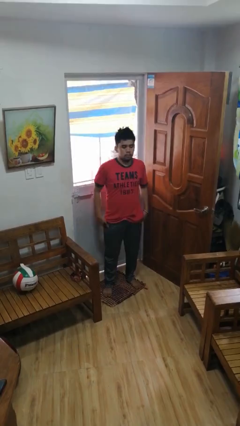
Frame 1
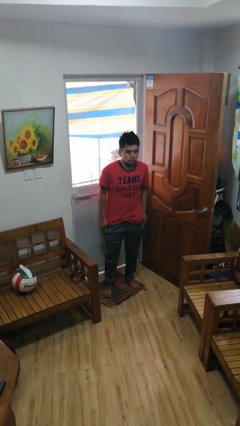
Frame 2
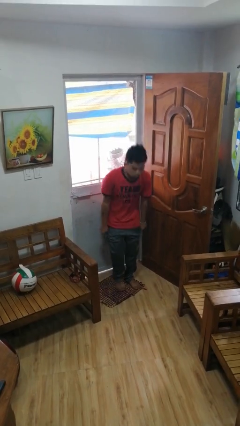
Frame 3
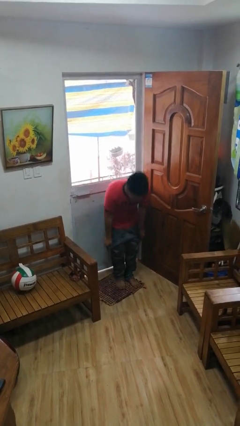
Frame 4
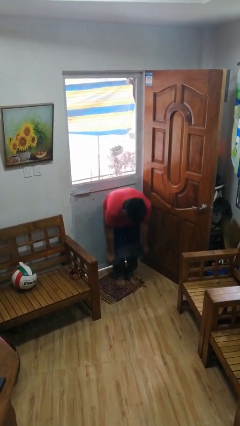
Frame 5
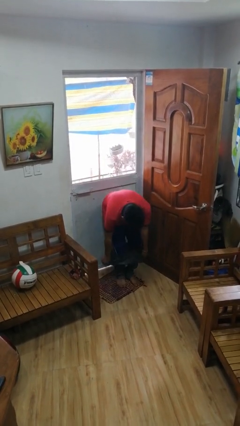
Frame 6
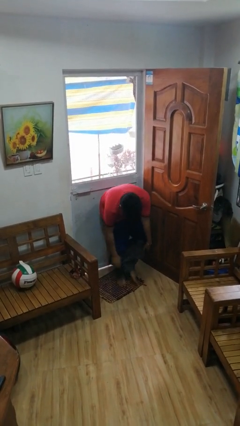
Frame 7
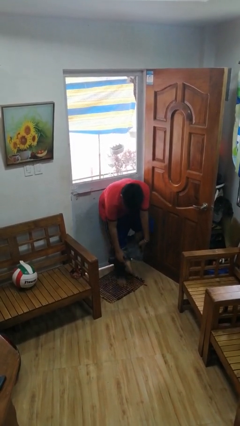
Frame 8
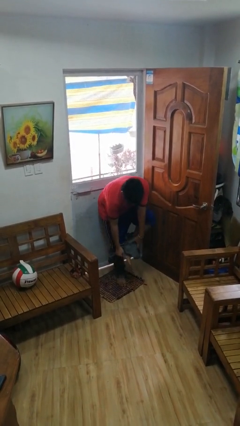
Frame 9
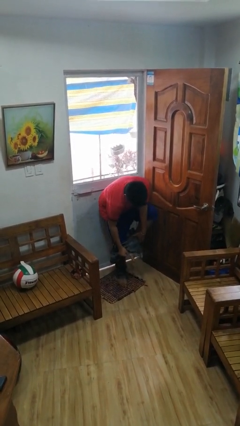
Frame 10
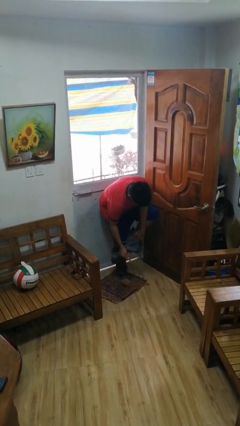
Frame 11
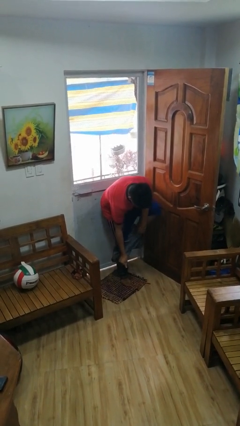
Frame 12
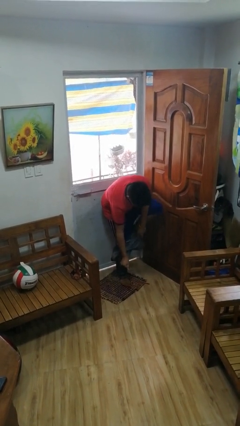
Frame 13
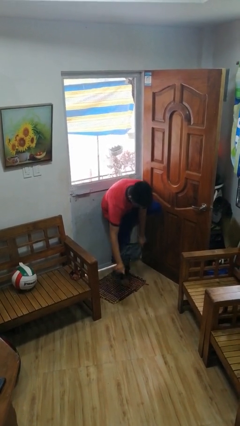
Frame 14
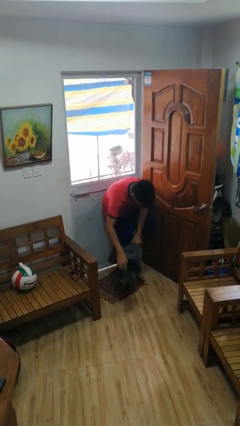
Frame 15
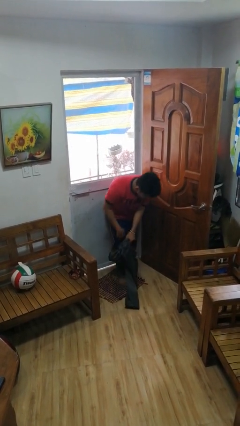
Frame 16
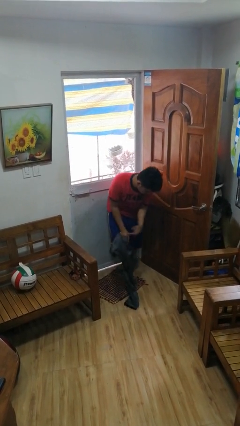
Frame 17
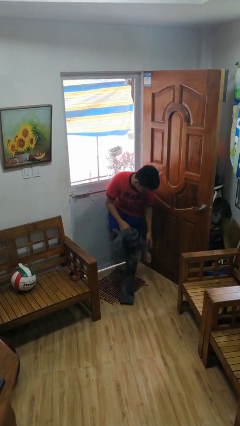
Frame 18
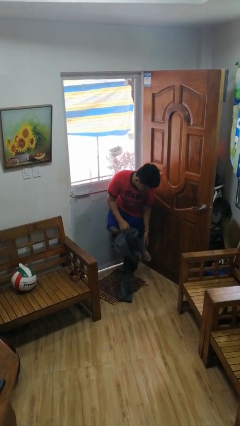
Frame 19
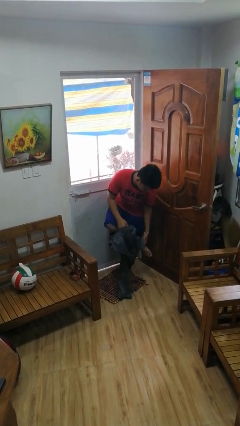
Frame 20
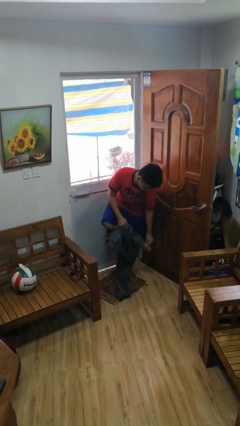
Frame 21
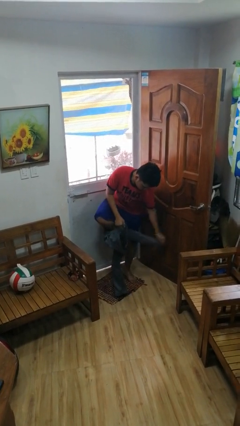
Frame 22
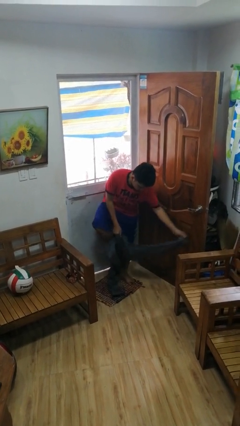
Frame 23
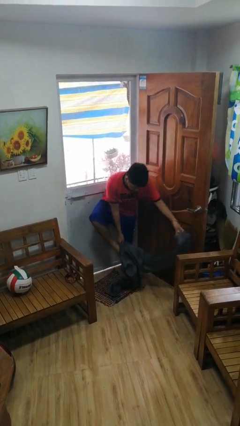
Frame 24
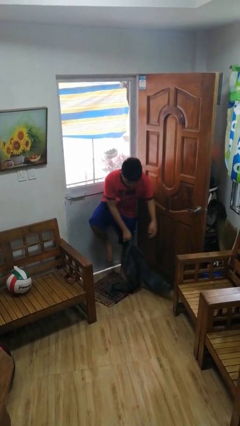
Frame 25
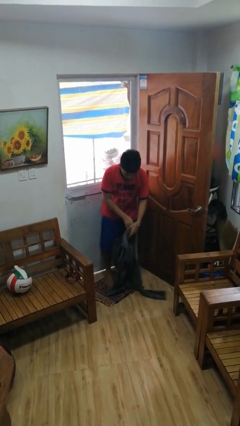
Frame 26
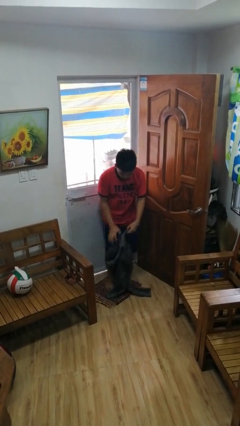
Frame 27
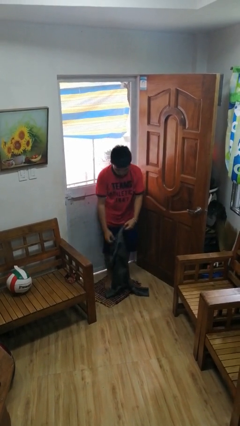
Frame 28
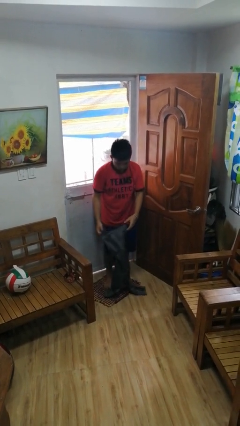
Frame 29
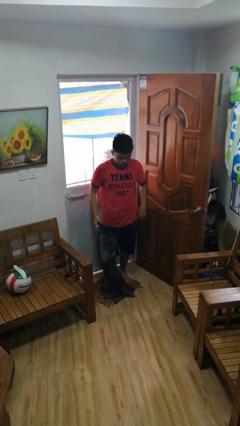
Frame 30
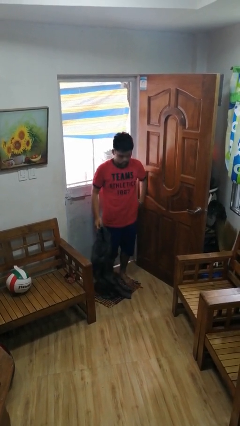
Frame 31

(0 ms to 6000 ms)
person takes off pants

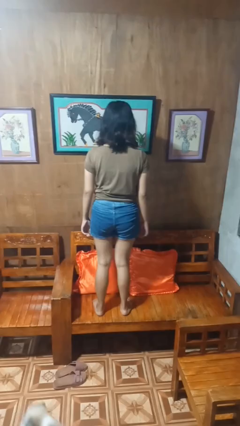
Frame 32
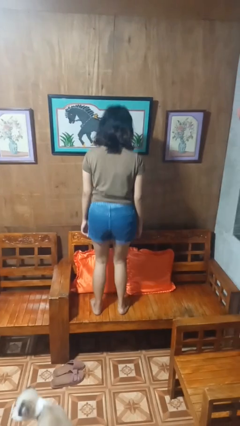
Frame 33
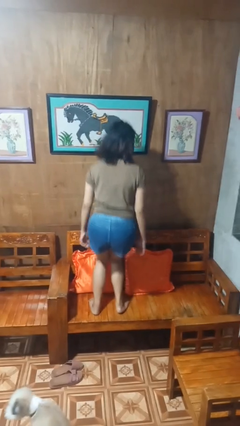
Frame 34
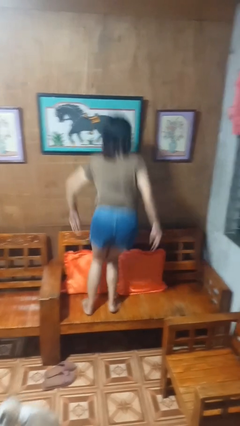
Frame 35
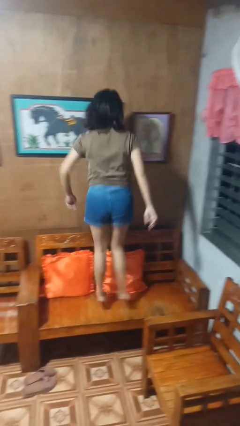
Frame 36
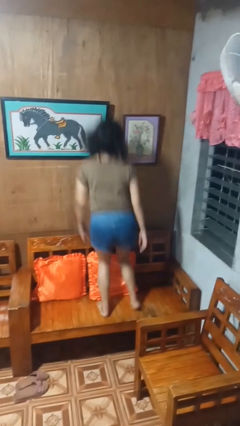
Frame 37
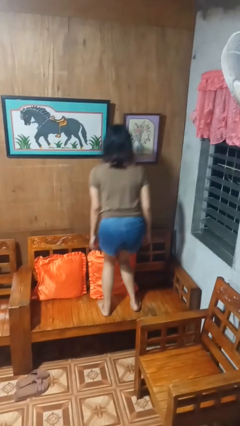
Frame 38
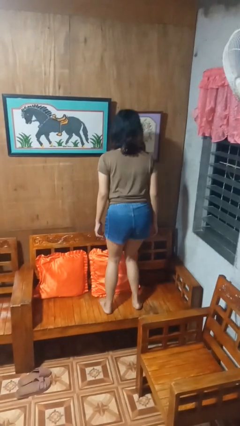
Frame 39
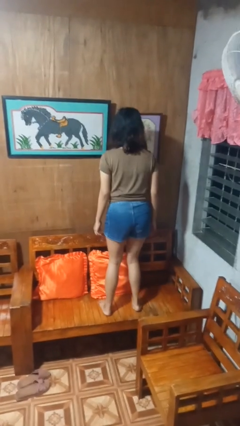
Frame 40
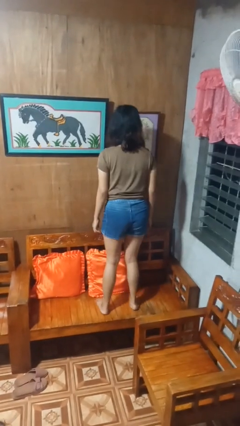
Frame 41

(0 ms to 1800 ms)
person jumps on couch

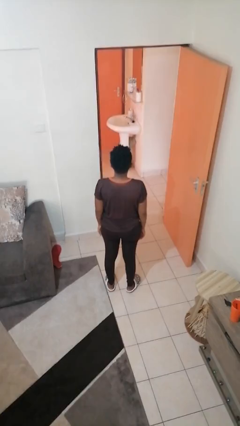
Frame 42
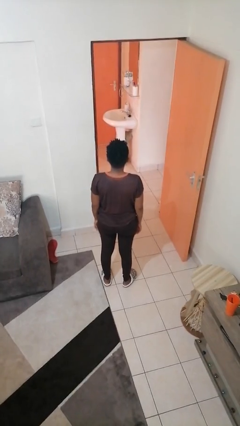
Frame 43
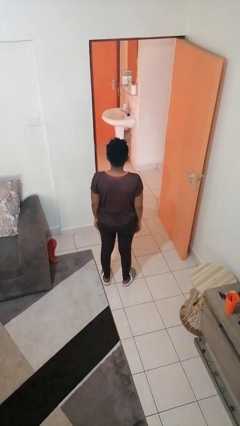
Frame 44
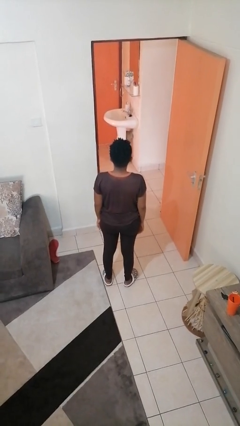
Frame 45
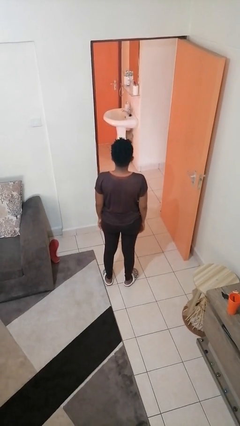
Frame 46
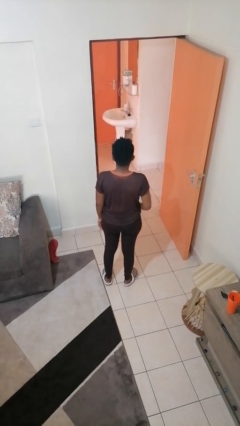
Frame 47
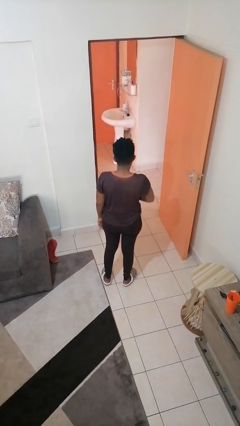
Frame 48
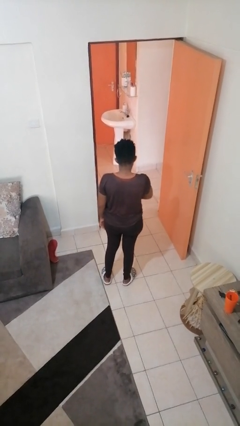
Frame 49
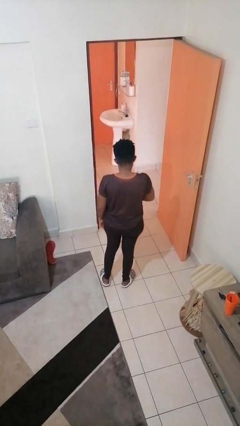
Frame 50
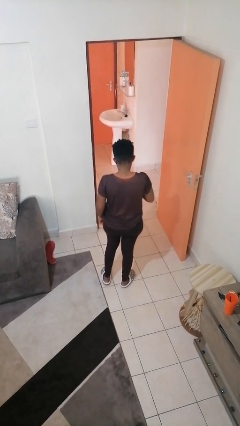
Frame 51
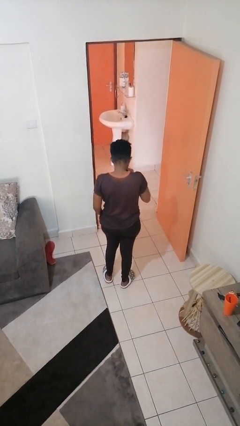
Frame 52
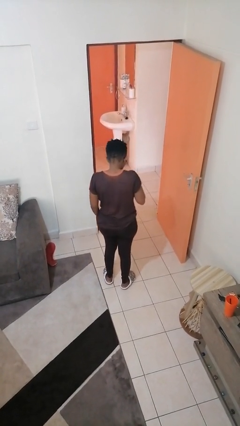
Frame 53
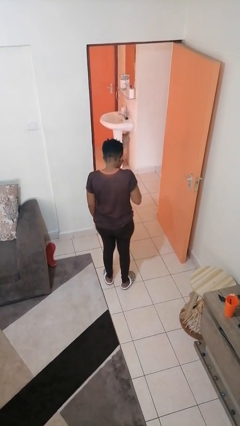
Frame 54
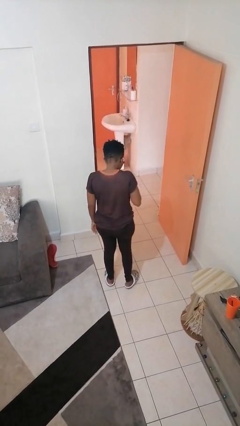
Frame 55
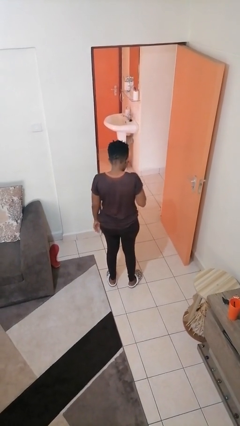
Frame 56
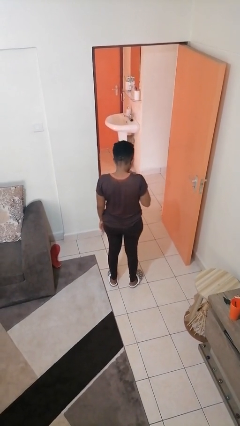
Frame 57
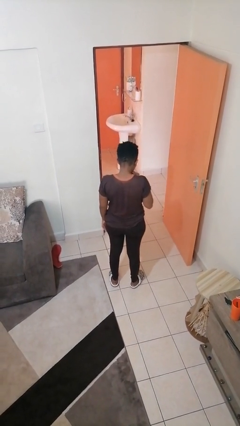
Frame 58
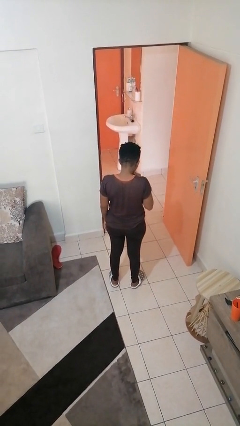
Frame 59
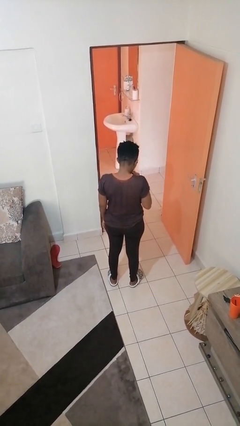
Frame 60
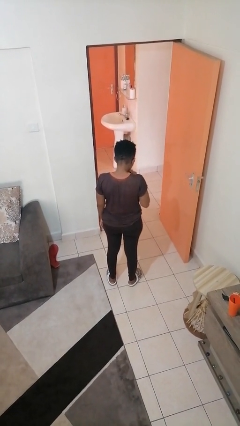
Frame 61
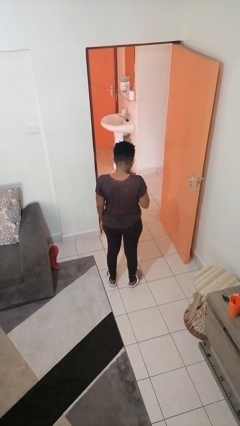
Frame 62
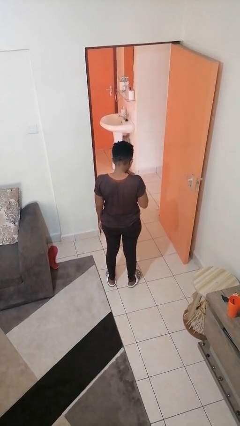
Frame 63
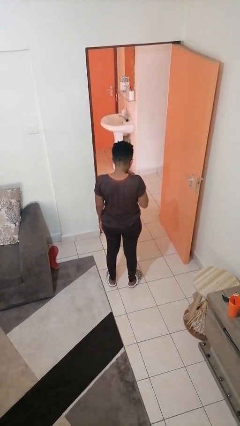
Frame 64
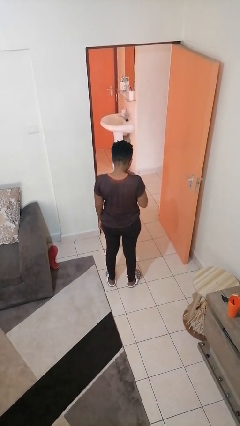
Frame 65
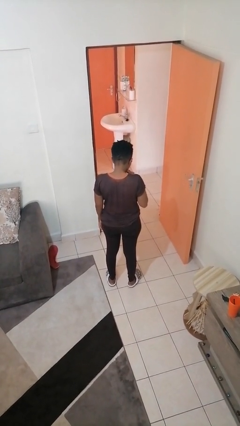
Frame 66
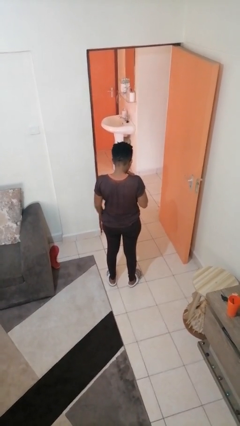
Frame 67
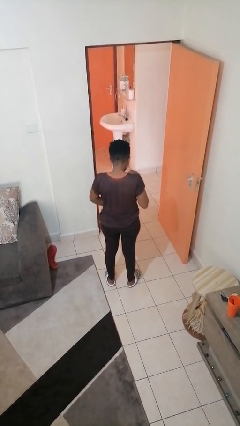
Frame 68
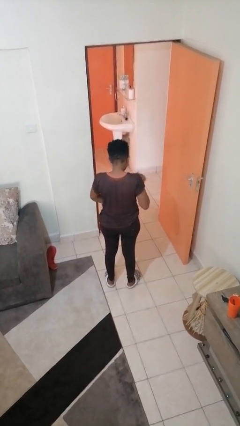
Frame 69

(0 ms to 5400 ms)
person takes phone from pocket

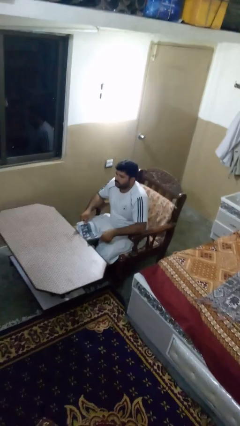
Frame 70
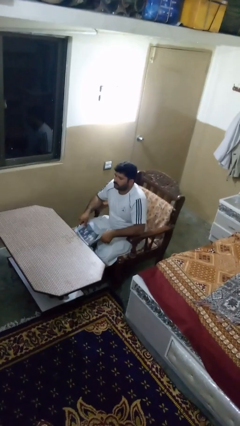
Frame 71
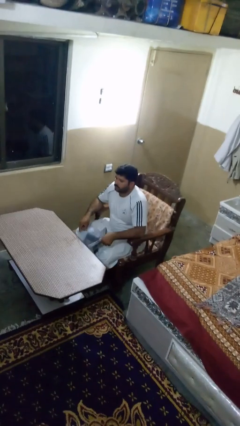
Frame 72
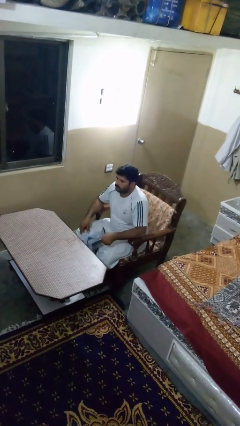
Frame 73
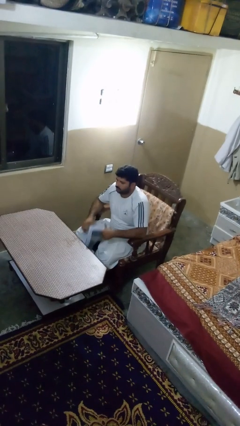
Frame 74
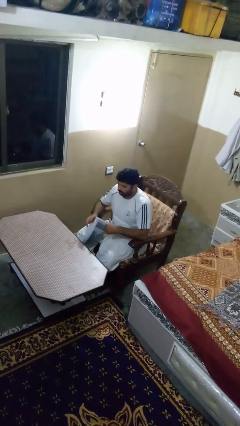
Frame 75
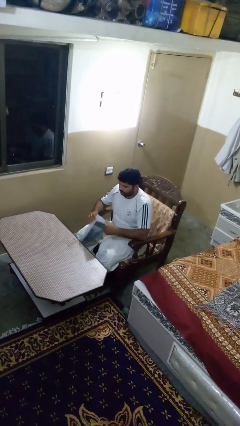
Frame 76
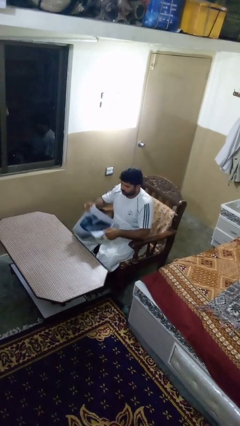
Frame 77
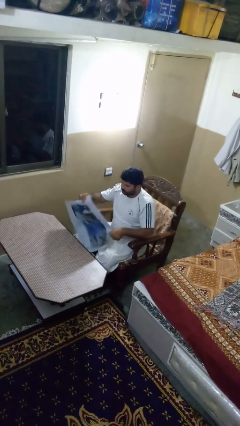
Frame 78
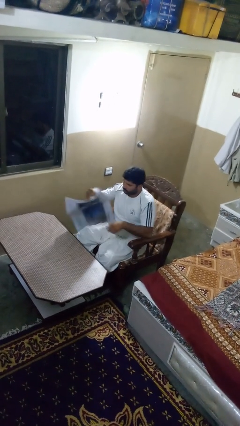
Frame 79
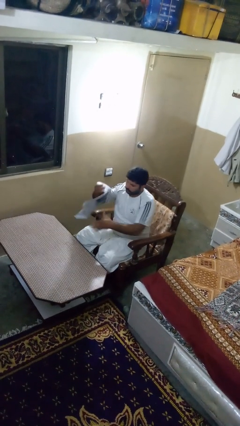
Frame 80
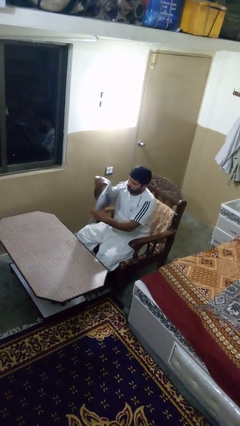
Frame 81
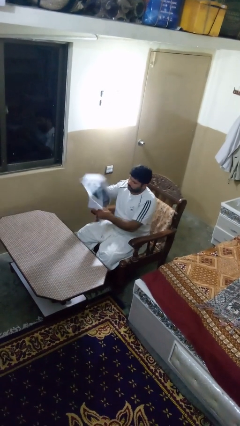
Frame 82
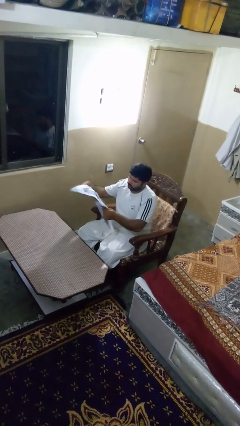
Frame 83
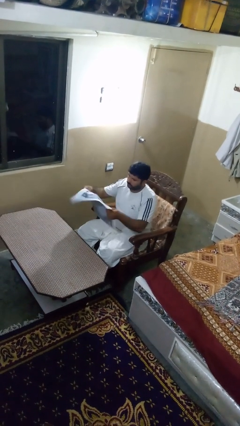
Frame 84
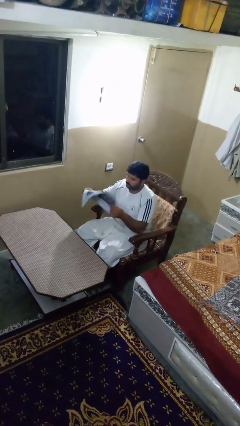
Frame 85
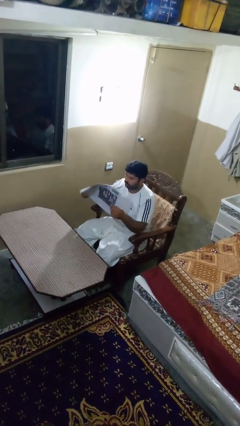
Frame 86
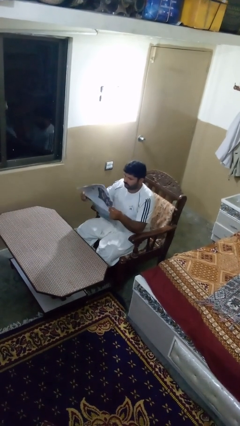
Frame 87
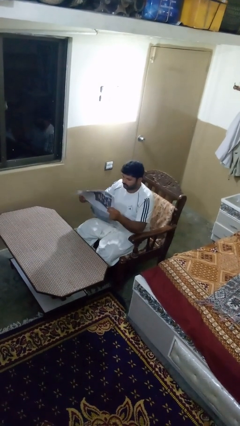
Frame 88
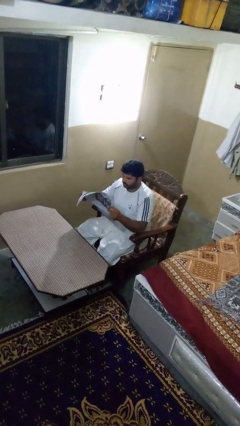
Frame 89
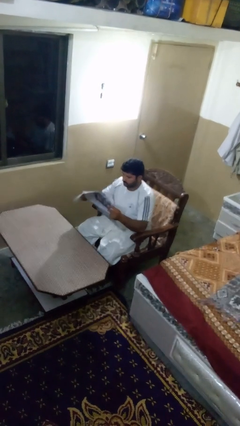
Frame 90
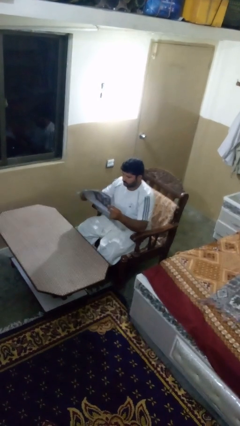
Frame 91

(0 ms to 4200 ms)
person reads newspaper

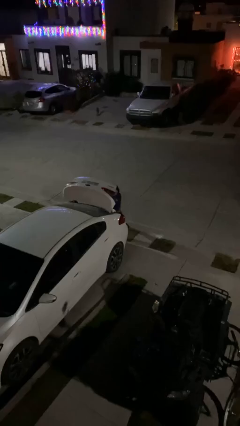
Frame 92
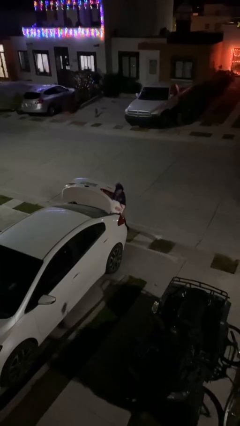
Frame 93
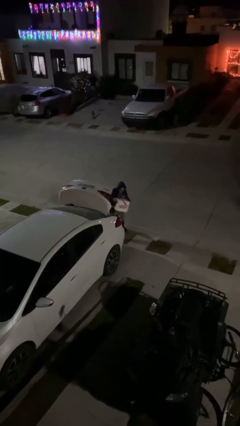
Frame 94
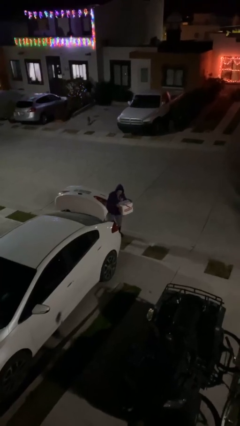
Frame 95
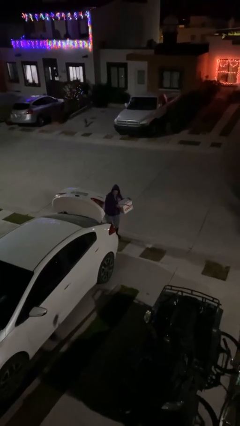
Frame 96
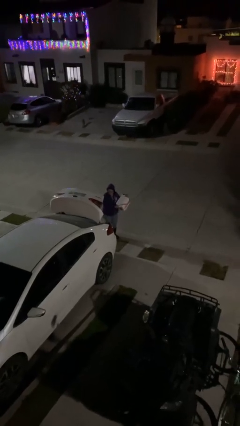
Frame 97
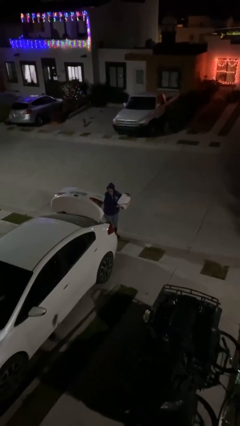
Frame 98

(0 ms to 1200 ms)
person unloads car
